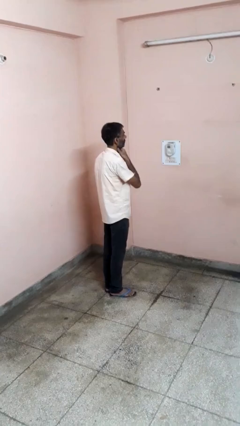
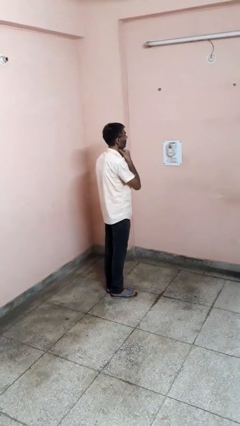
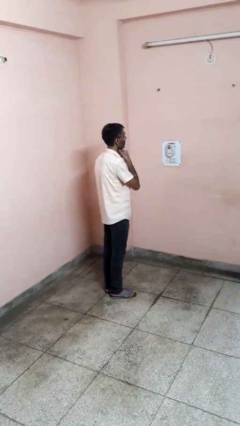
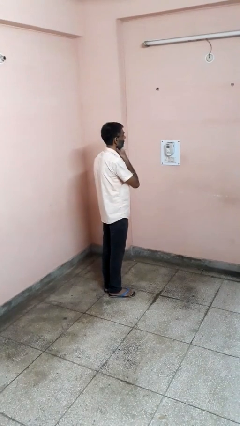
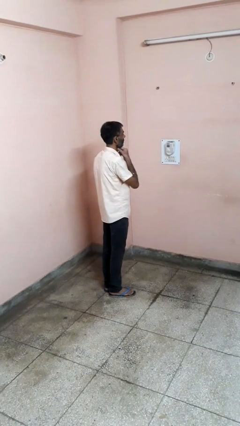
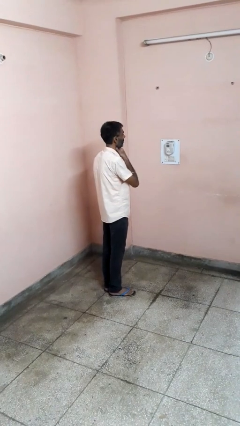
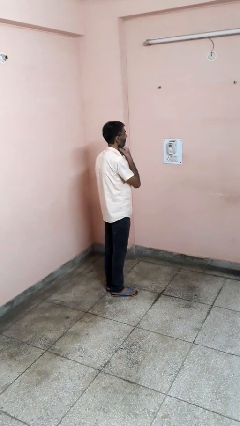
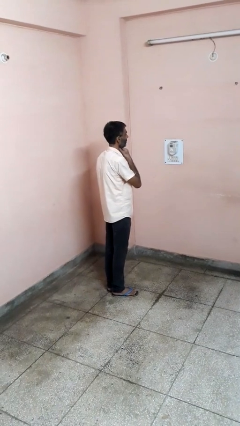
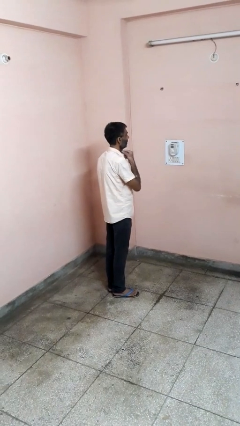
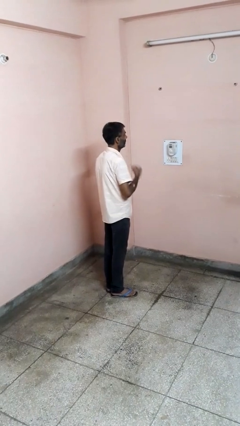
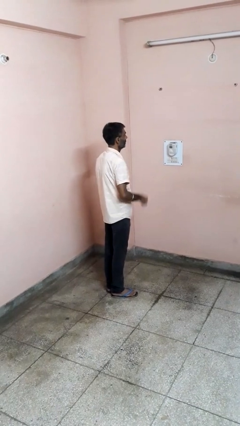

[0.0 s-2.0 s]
person rubs neck

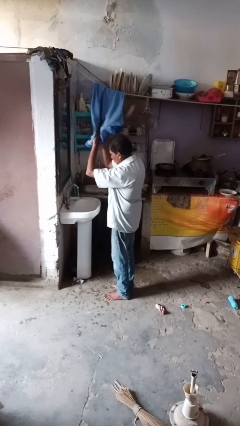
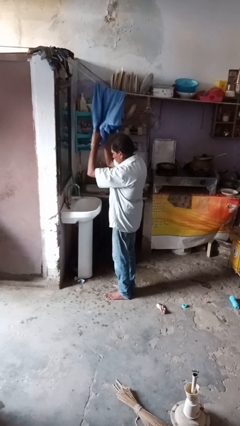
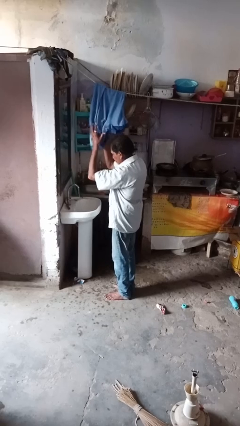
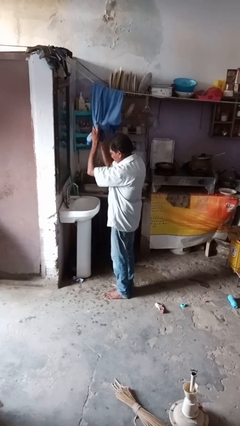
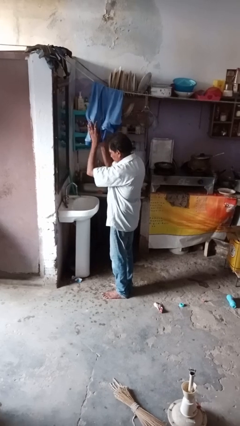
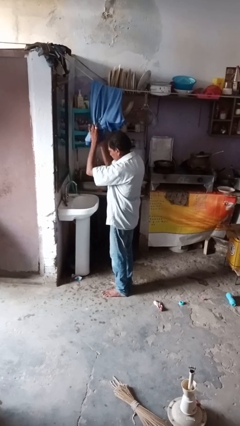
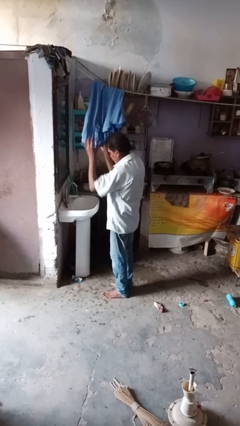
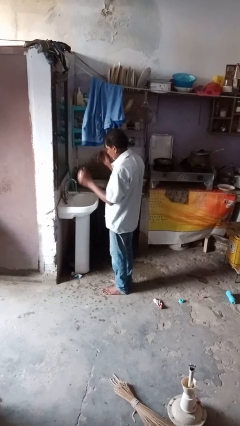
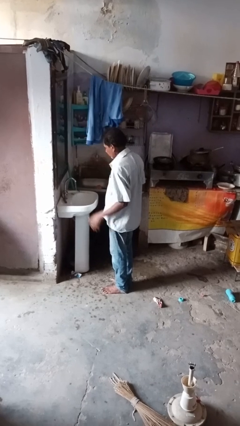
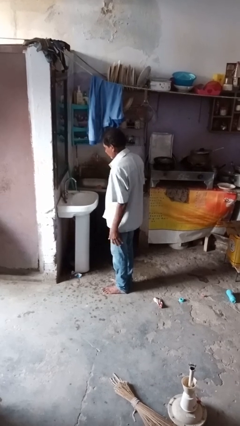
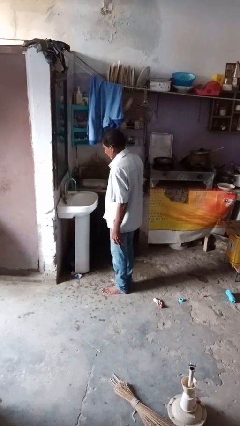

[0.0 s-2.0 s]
person dries hands with towel

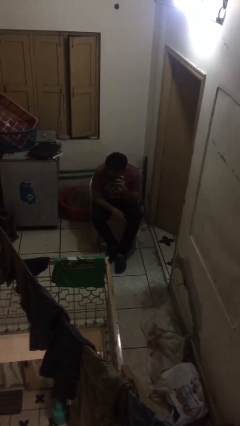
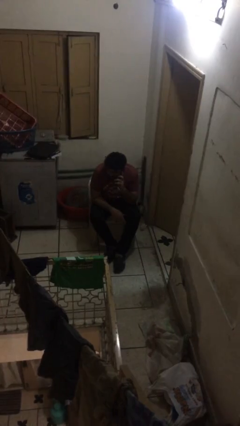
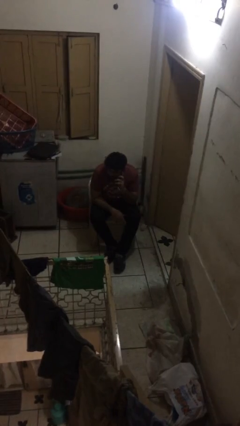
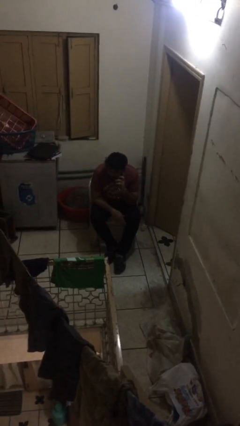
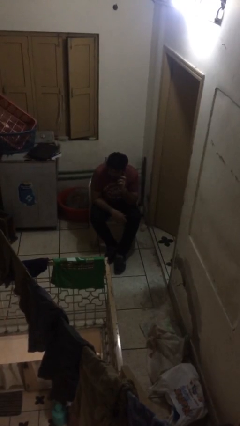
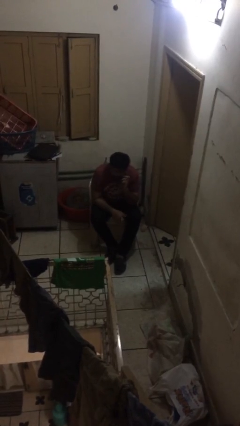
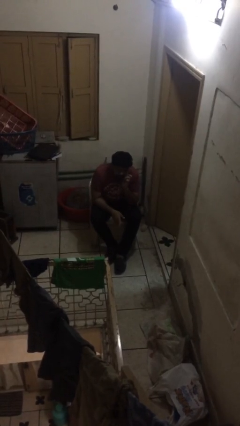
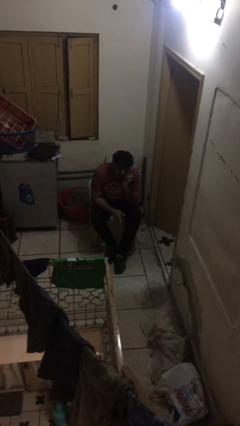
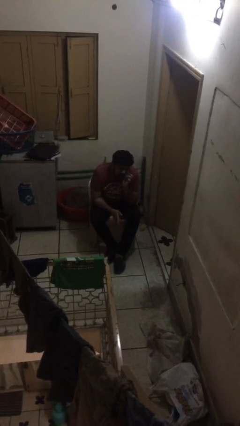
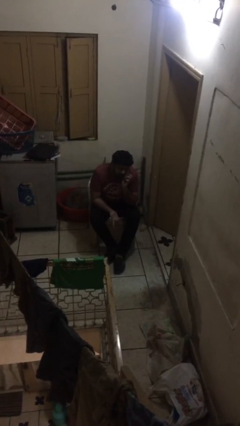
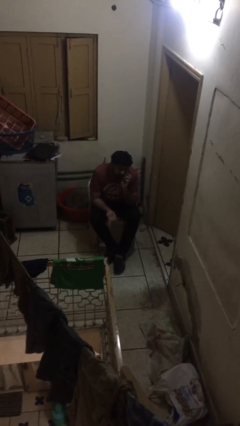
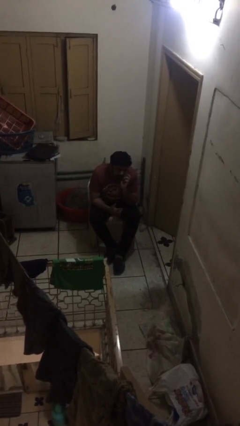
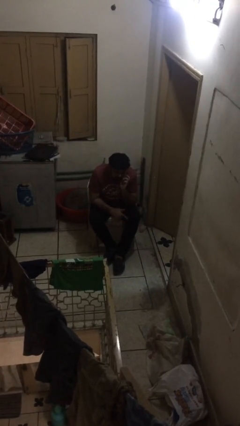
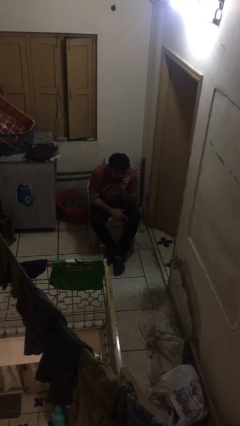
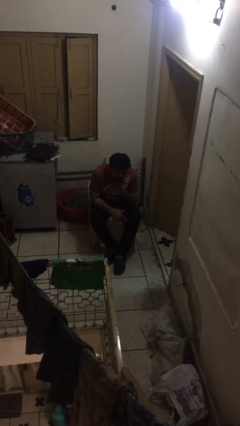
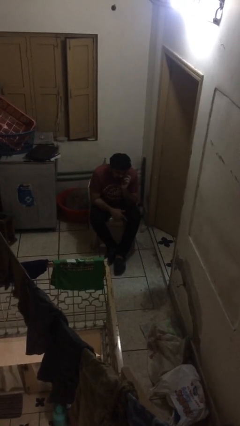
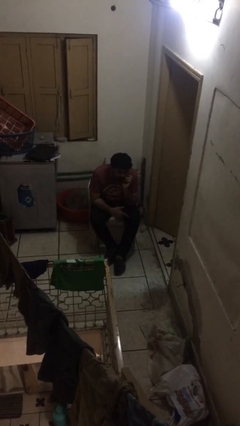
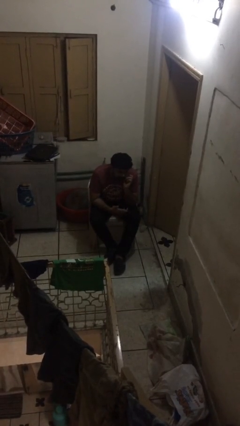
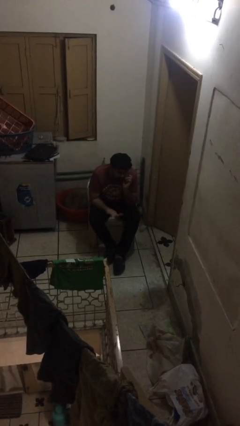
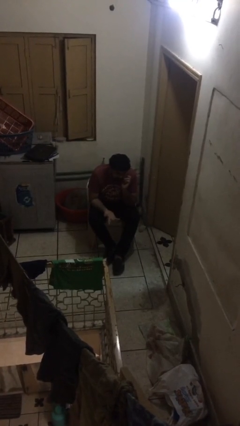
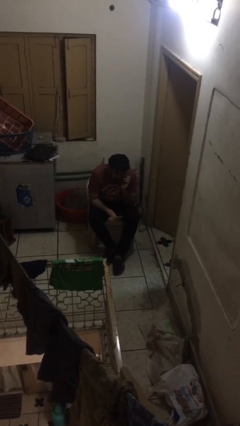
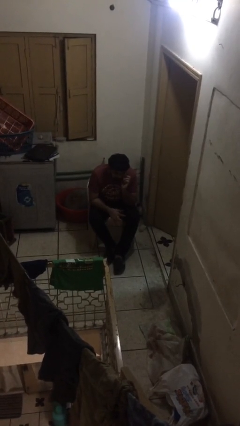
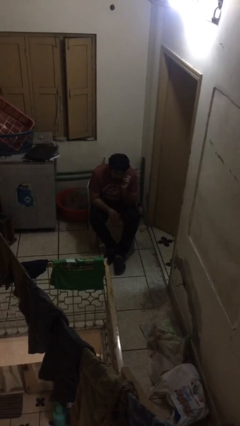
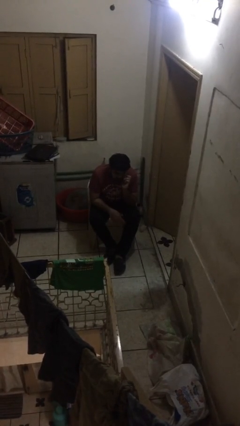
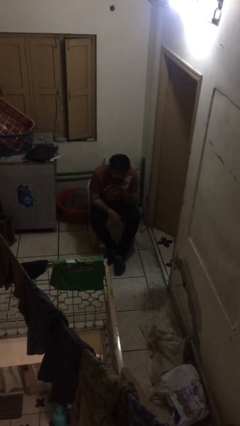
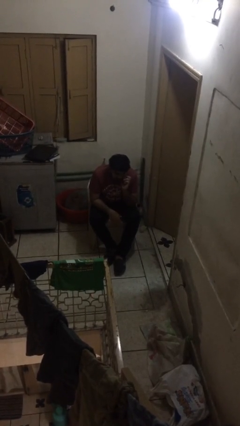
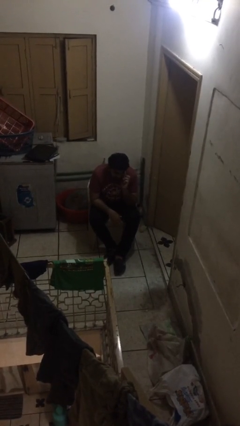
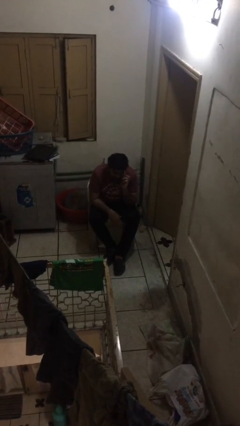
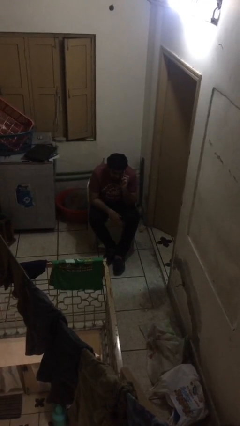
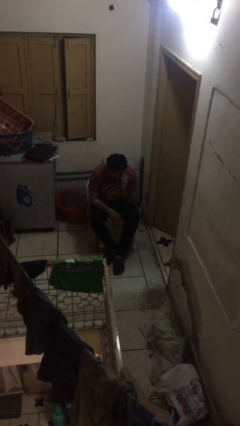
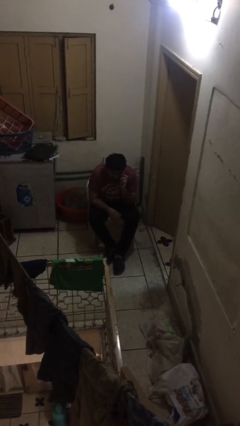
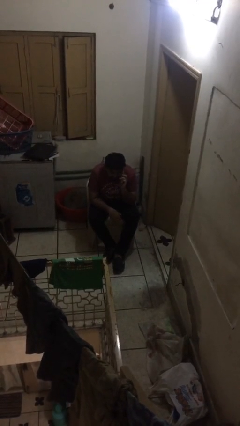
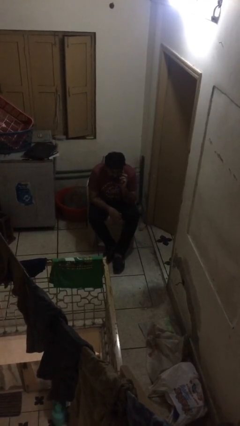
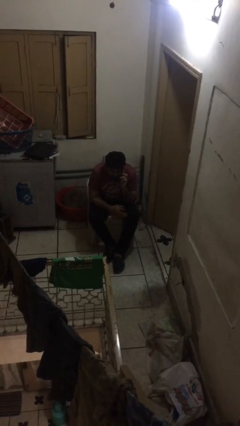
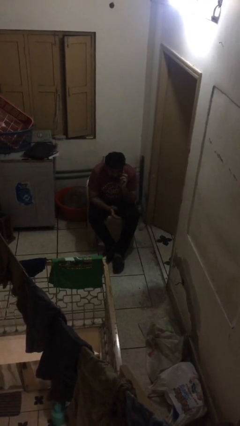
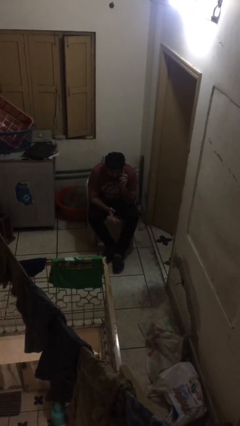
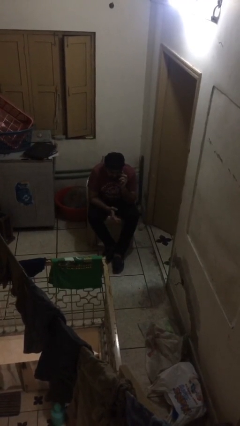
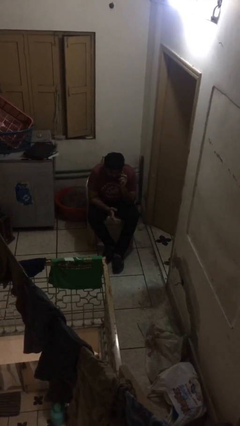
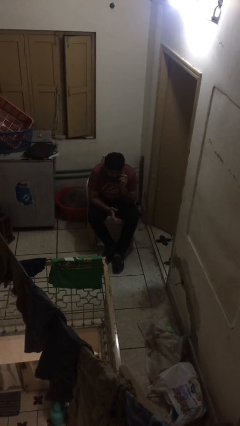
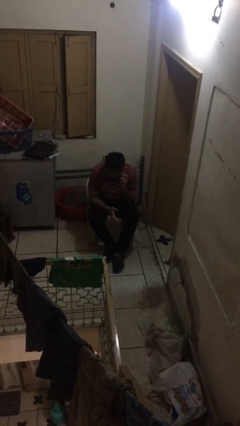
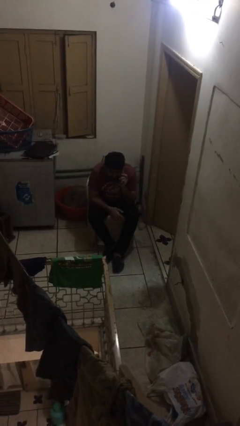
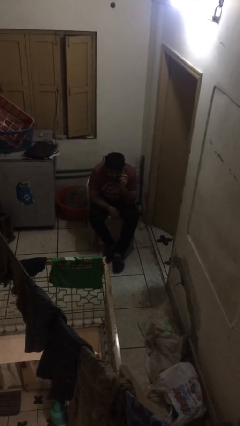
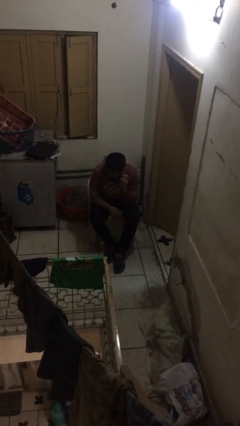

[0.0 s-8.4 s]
person talks on phone

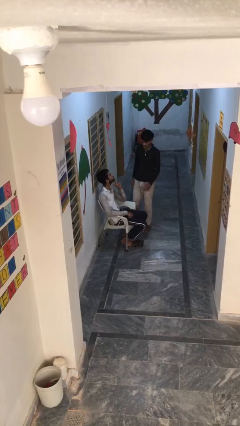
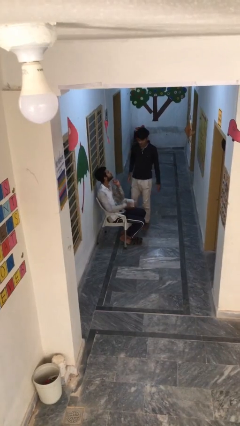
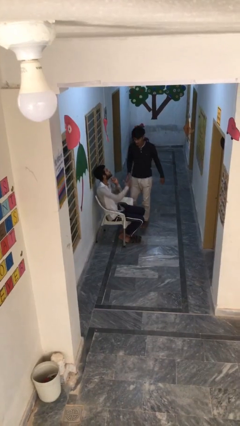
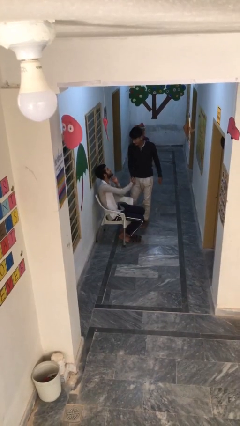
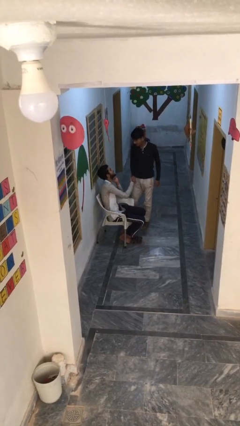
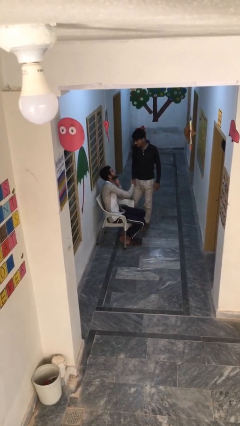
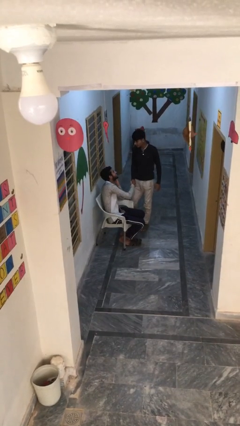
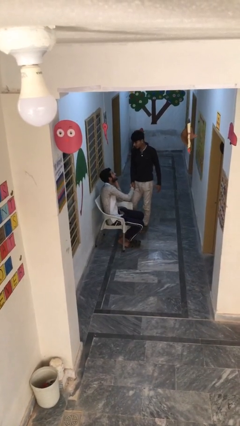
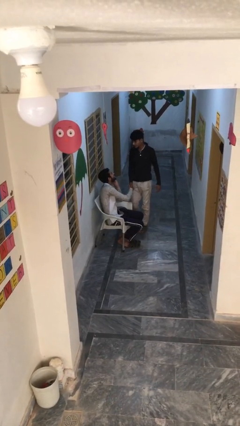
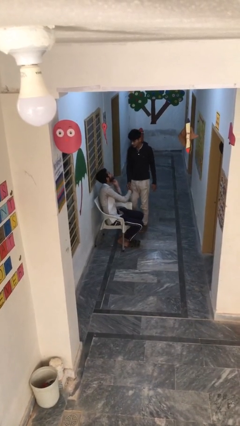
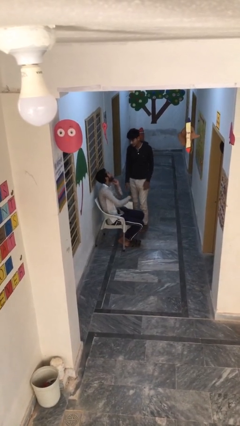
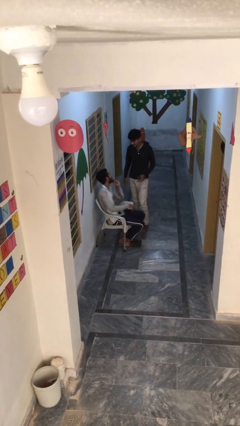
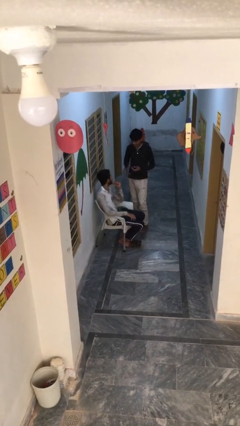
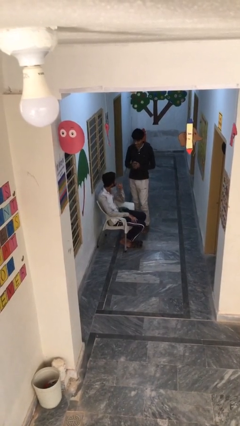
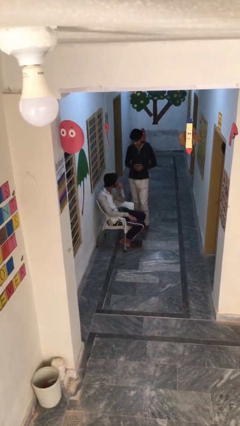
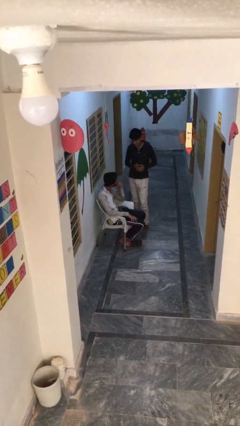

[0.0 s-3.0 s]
person shakes hand

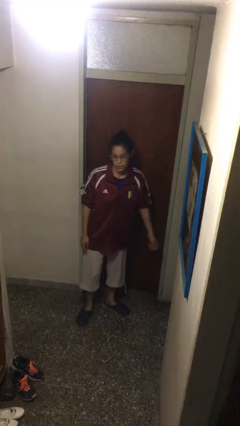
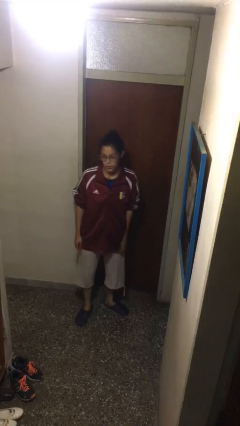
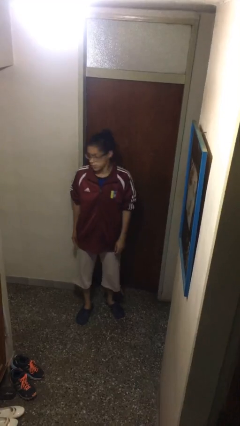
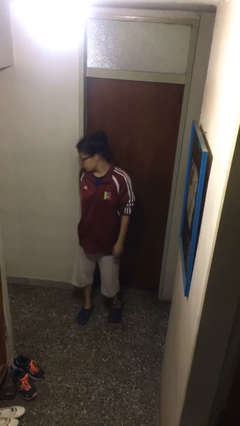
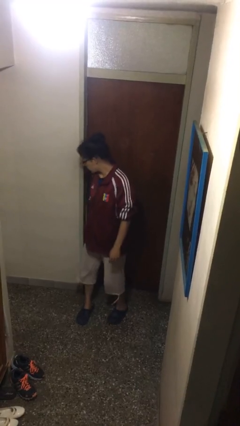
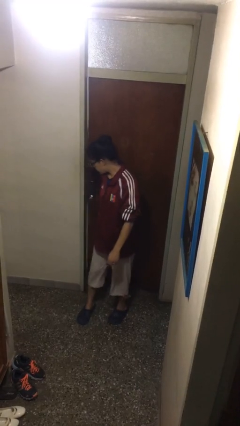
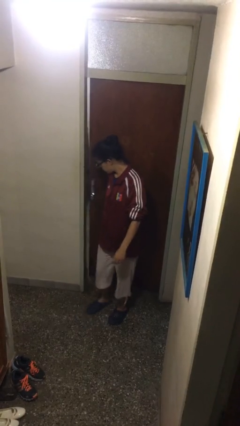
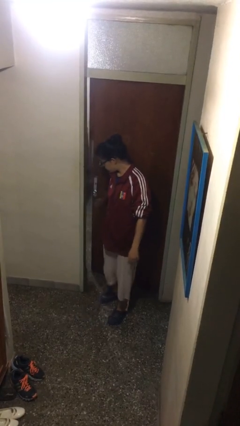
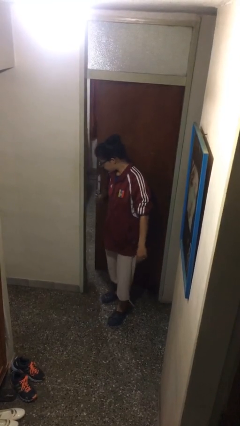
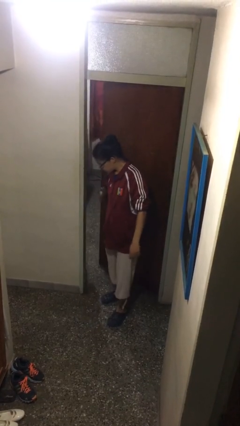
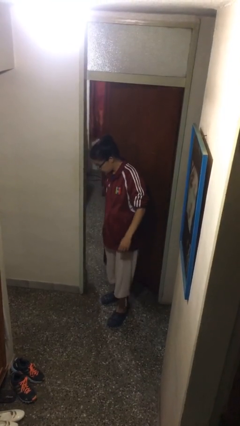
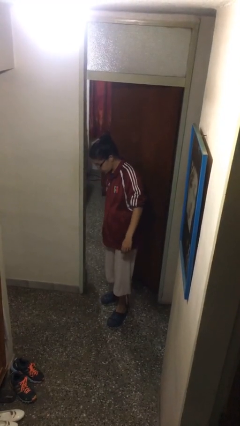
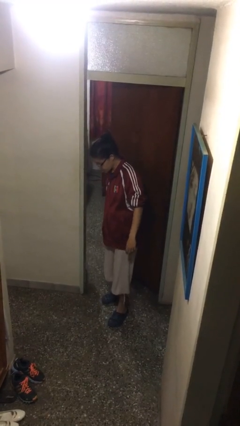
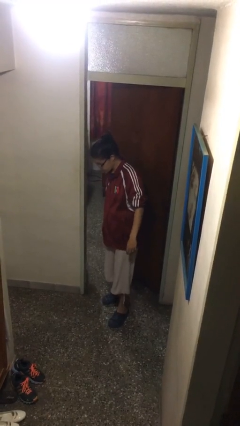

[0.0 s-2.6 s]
person opens facility door

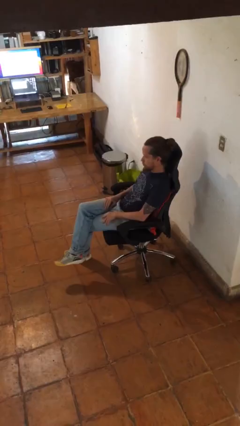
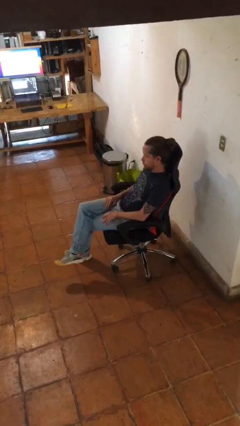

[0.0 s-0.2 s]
person looks at hands in lap
